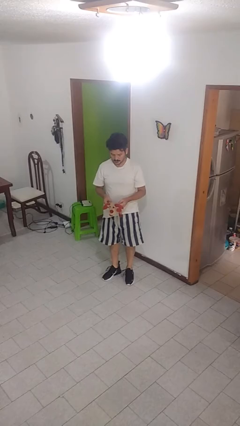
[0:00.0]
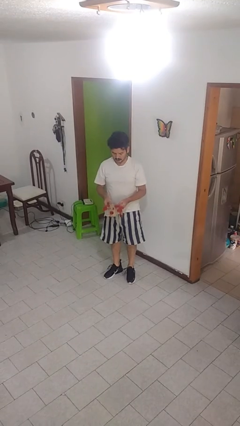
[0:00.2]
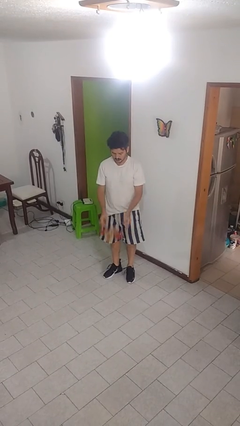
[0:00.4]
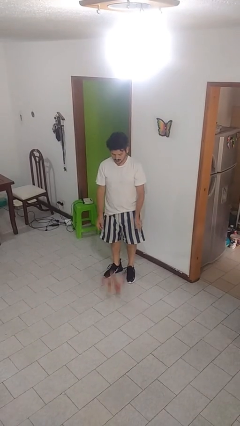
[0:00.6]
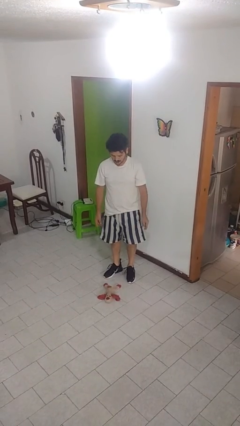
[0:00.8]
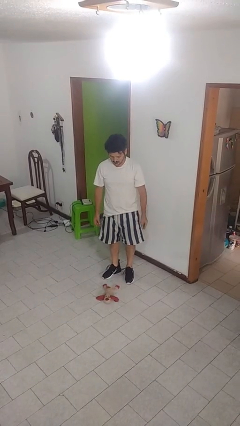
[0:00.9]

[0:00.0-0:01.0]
person throws object to ground

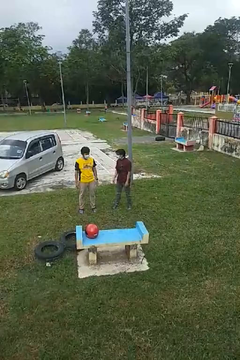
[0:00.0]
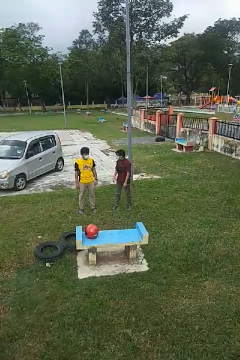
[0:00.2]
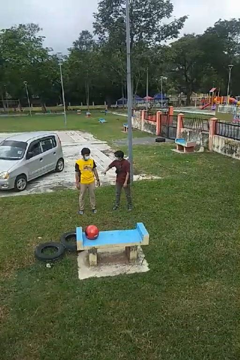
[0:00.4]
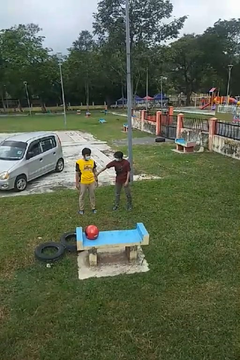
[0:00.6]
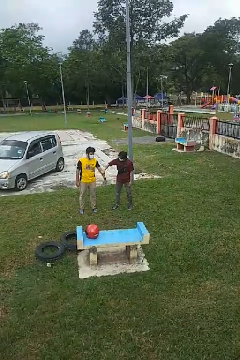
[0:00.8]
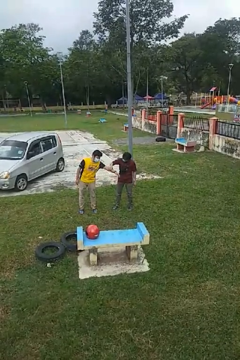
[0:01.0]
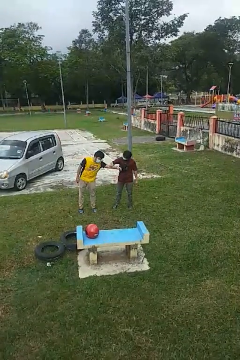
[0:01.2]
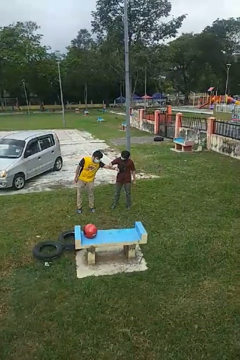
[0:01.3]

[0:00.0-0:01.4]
person grabs person by forearm

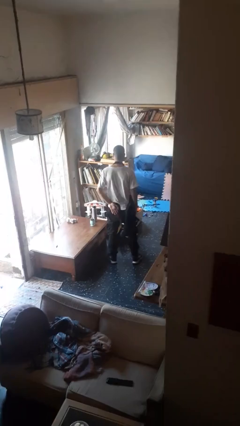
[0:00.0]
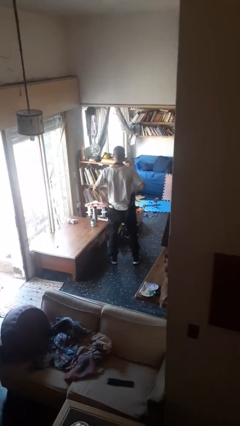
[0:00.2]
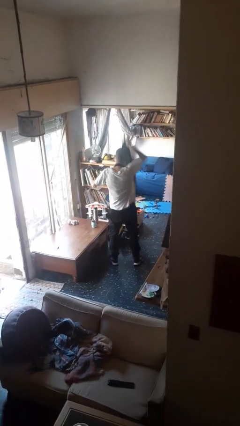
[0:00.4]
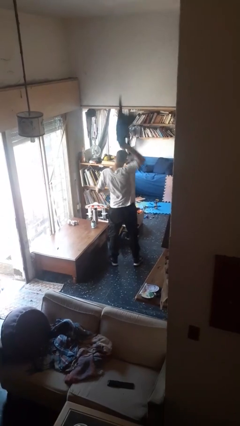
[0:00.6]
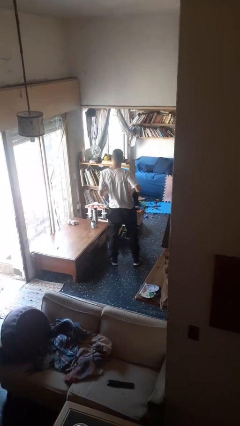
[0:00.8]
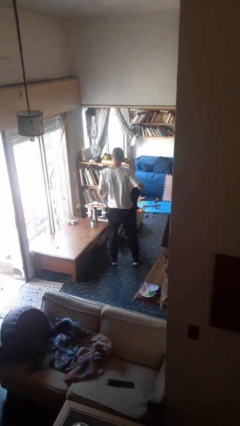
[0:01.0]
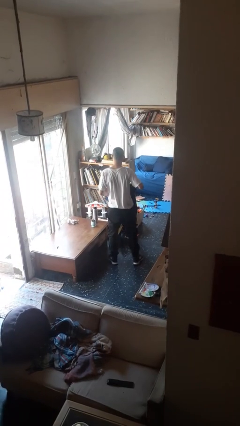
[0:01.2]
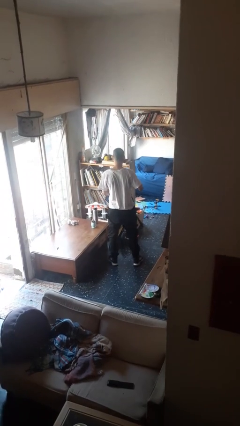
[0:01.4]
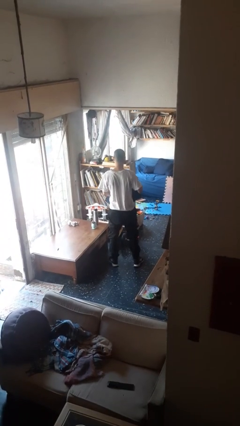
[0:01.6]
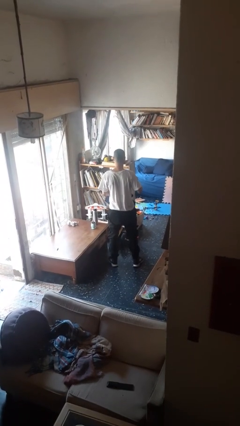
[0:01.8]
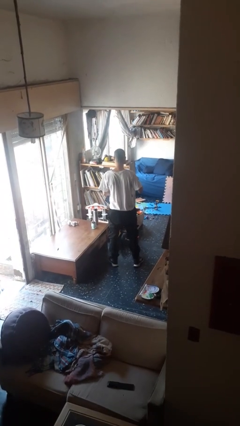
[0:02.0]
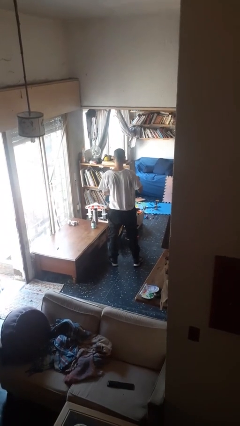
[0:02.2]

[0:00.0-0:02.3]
person takes off apron

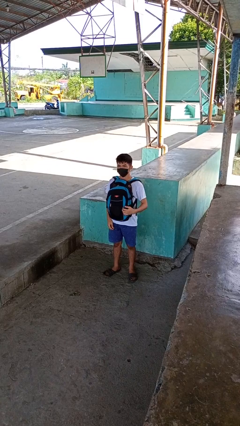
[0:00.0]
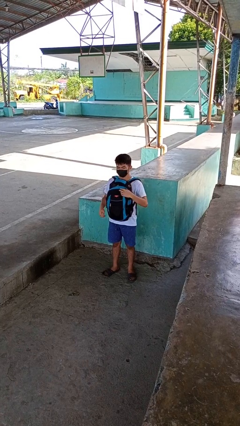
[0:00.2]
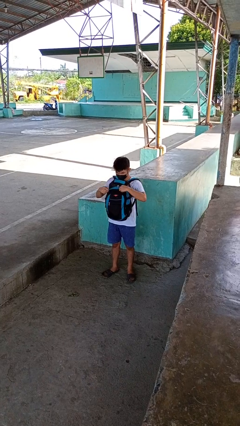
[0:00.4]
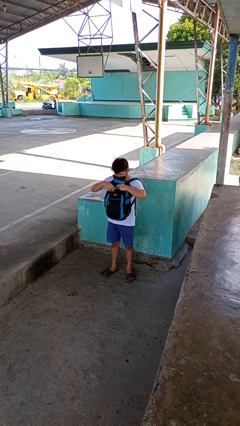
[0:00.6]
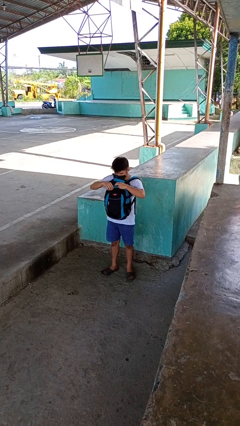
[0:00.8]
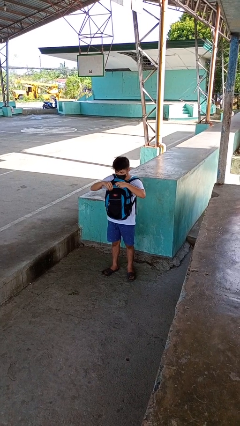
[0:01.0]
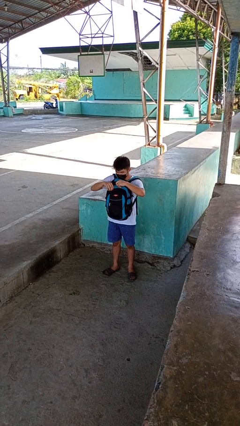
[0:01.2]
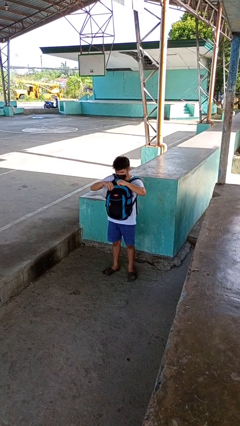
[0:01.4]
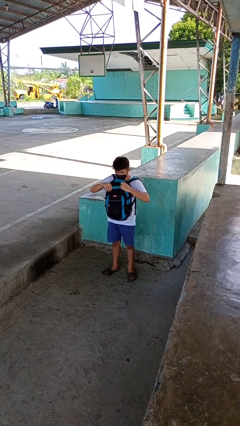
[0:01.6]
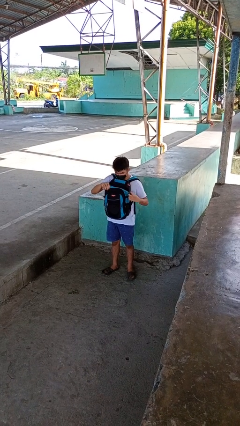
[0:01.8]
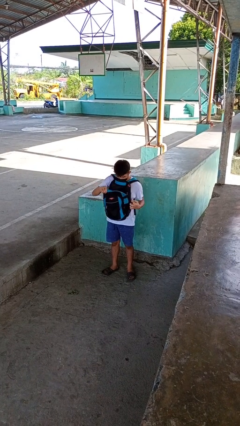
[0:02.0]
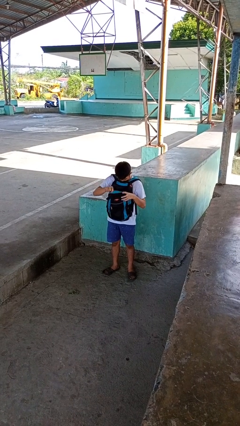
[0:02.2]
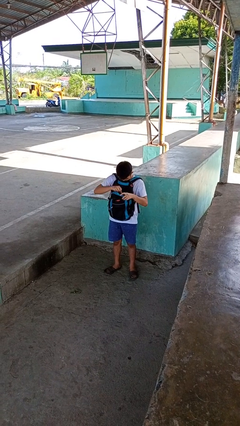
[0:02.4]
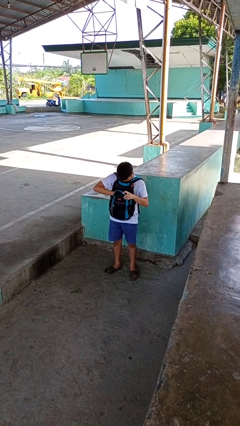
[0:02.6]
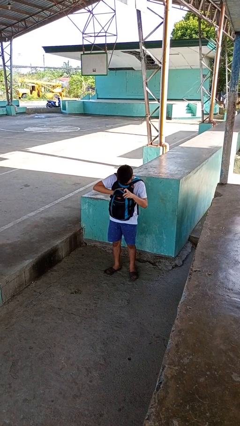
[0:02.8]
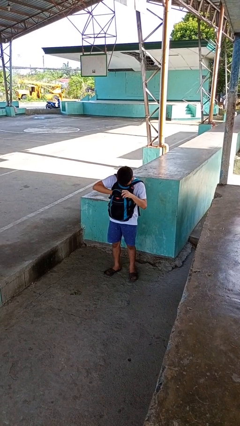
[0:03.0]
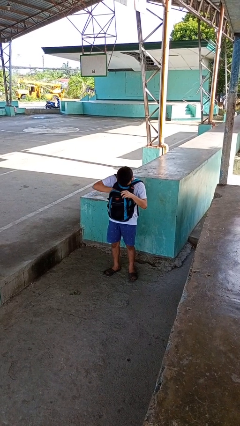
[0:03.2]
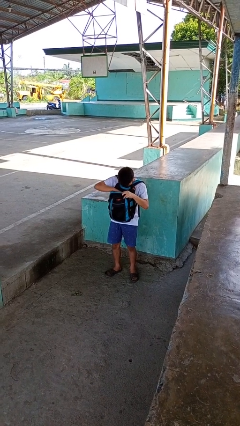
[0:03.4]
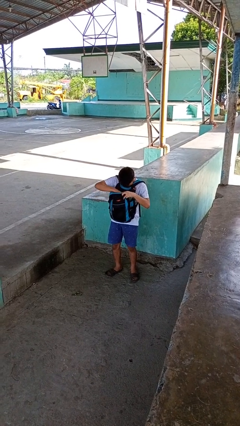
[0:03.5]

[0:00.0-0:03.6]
person searches in backpack

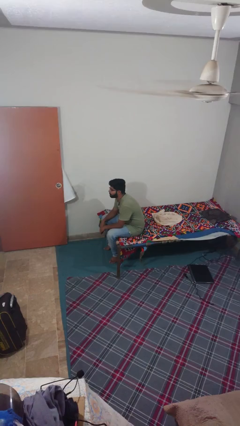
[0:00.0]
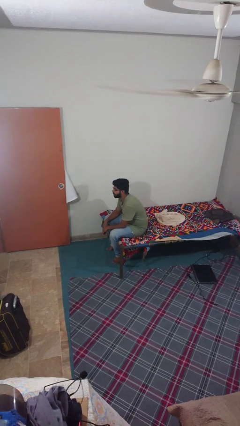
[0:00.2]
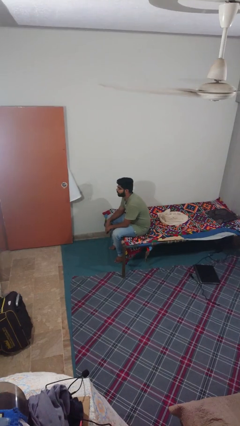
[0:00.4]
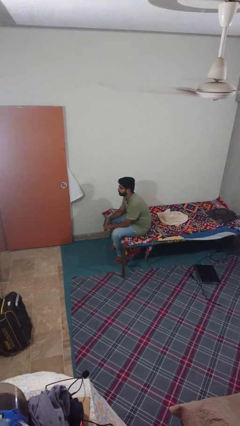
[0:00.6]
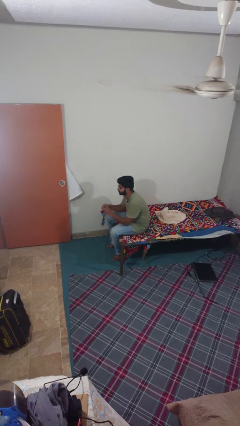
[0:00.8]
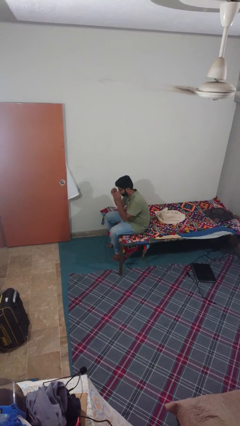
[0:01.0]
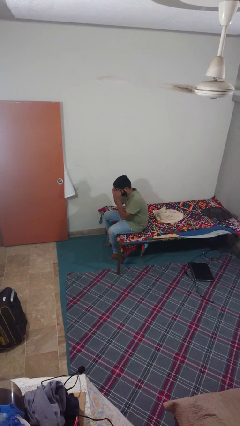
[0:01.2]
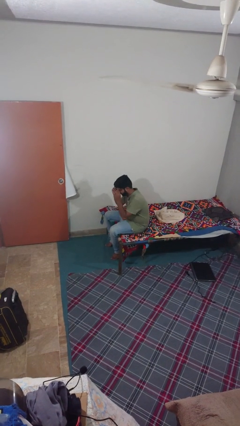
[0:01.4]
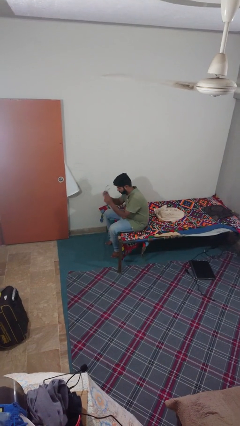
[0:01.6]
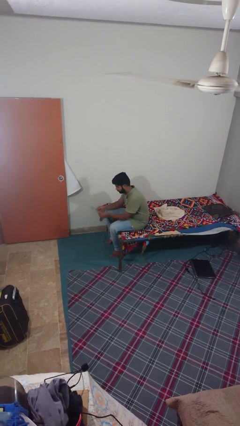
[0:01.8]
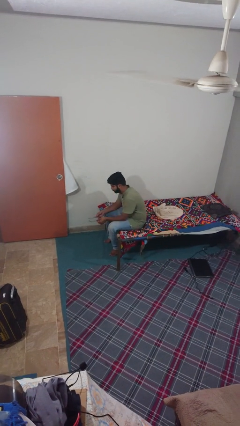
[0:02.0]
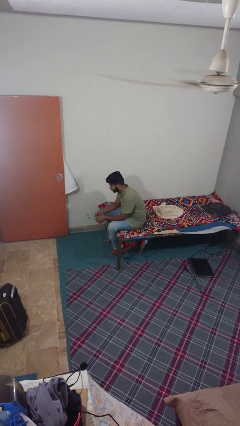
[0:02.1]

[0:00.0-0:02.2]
person takes off glasses

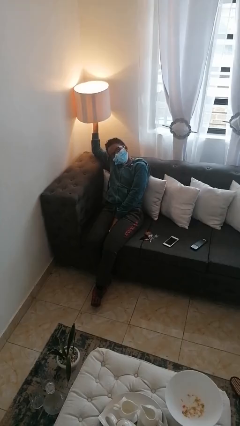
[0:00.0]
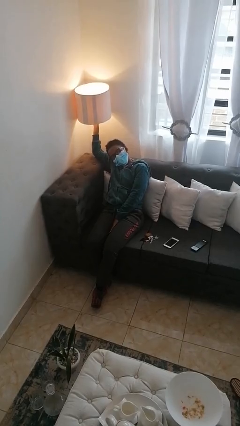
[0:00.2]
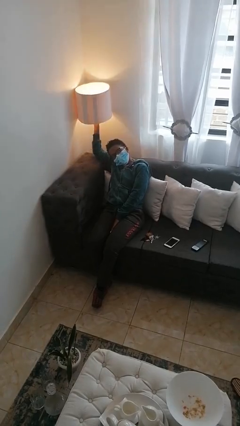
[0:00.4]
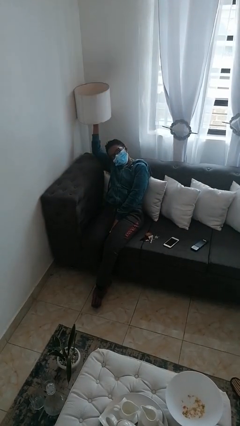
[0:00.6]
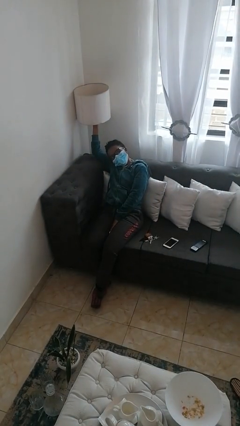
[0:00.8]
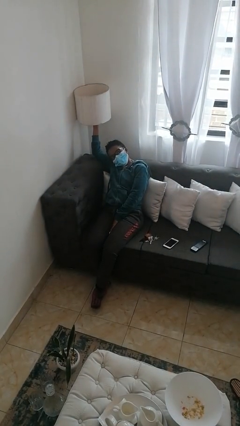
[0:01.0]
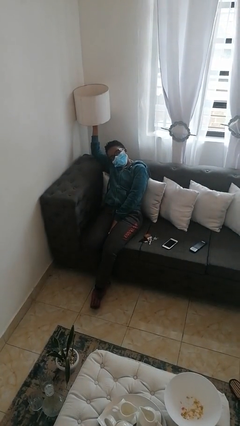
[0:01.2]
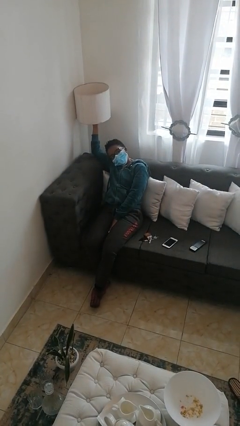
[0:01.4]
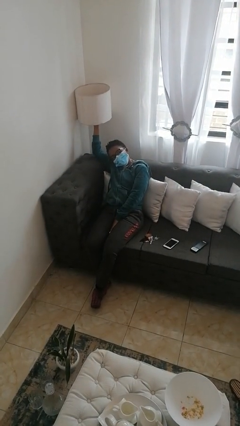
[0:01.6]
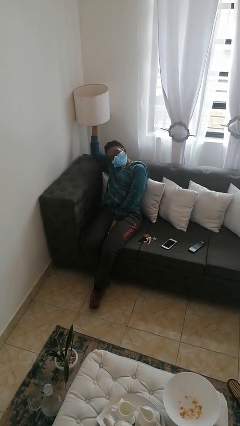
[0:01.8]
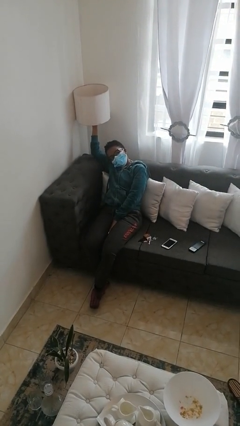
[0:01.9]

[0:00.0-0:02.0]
person turns off lamp

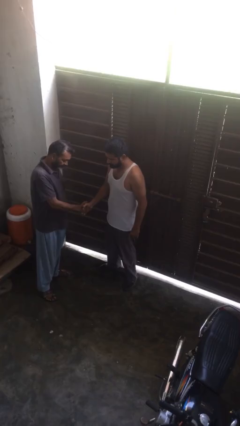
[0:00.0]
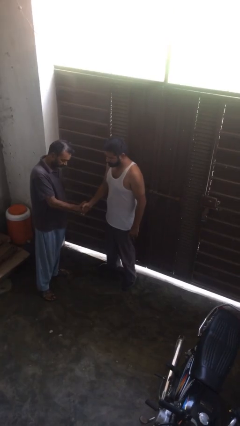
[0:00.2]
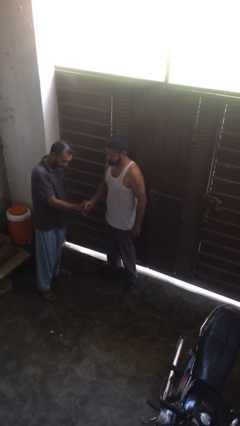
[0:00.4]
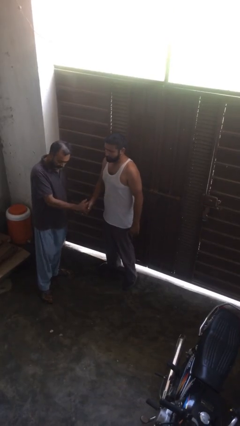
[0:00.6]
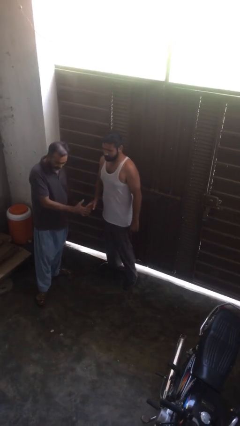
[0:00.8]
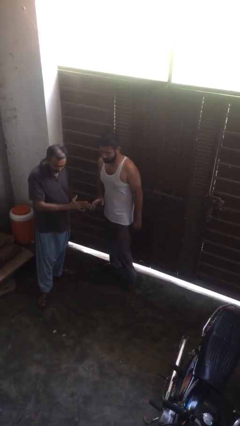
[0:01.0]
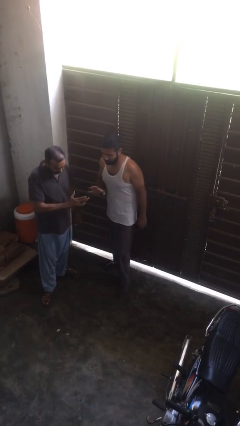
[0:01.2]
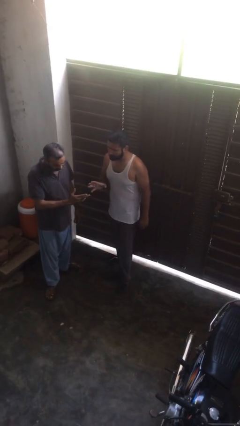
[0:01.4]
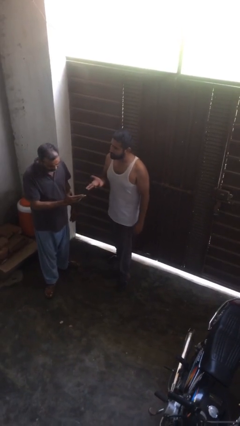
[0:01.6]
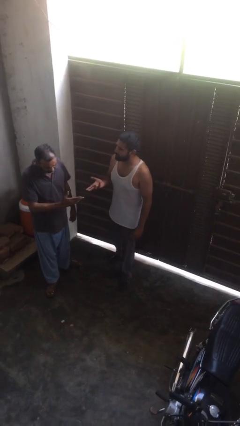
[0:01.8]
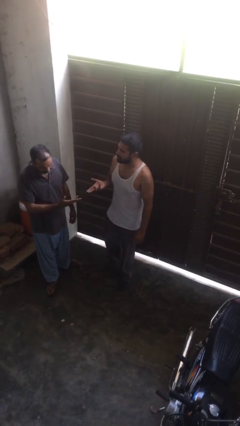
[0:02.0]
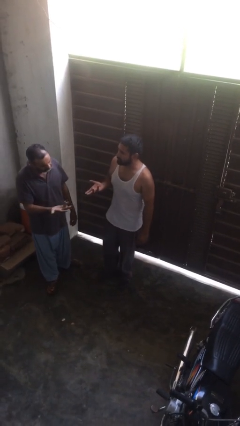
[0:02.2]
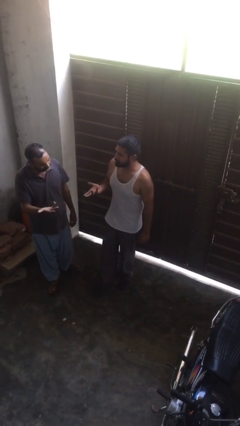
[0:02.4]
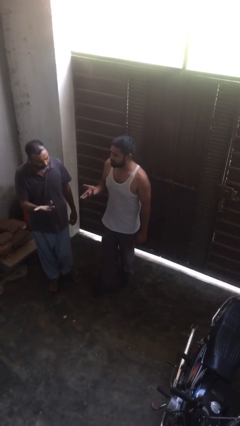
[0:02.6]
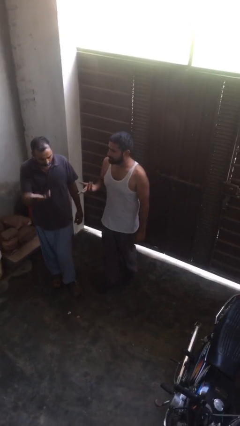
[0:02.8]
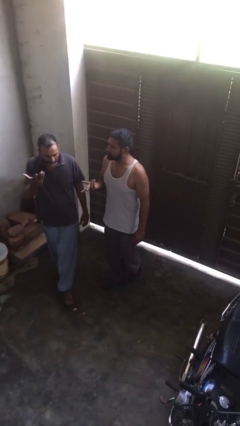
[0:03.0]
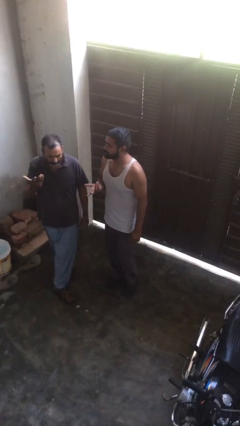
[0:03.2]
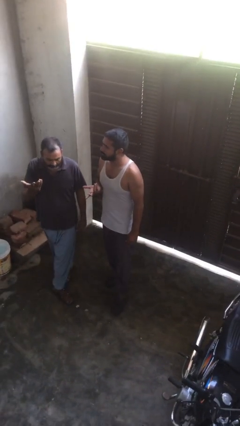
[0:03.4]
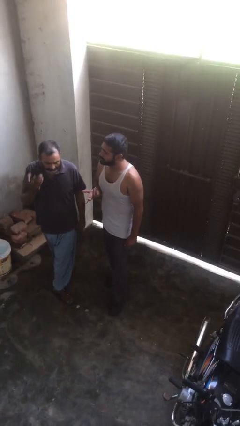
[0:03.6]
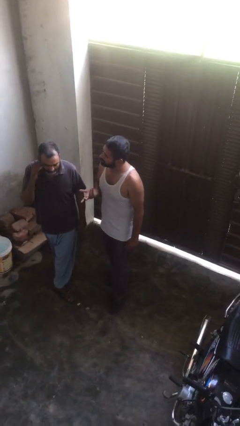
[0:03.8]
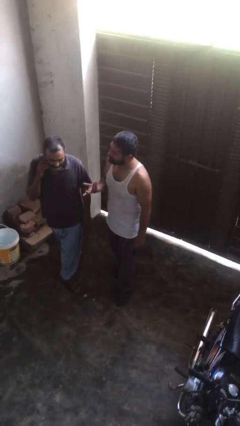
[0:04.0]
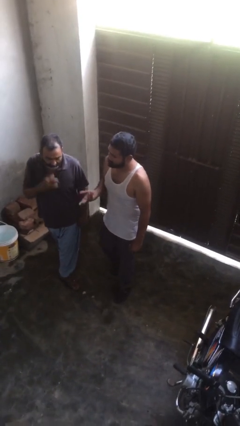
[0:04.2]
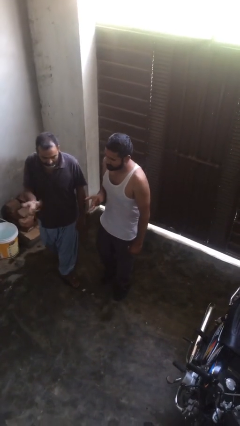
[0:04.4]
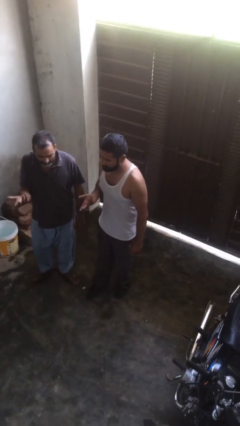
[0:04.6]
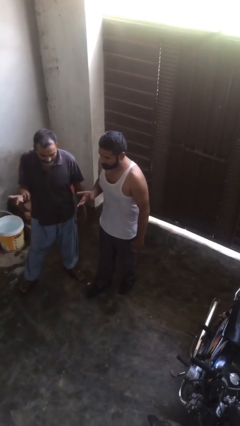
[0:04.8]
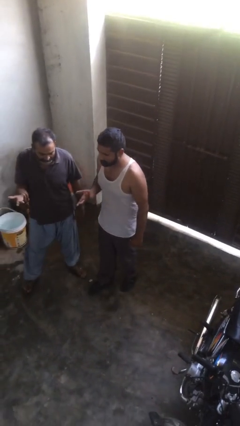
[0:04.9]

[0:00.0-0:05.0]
person talks to person
